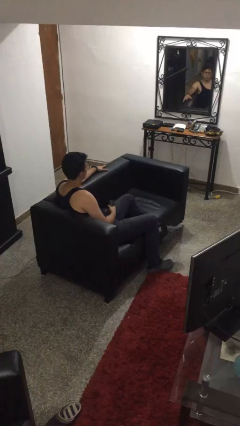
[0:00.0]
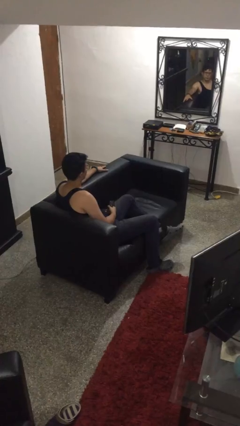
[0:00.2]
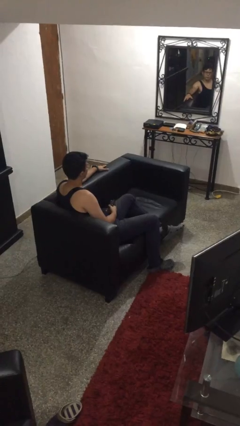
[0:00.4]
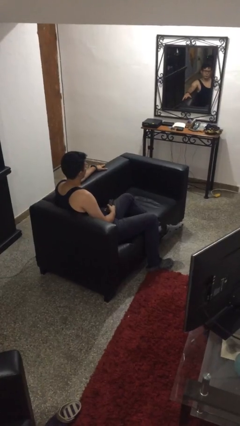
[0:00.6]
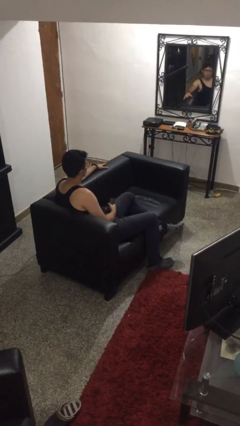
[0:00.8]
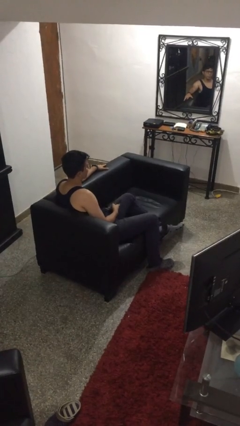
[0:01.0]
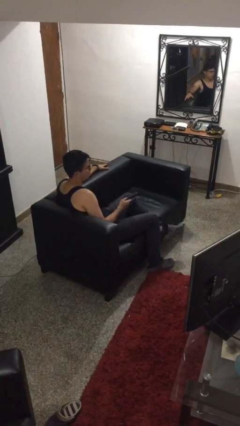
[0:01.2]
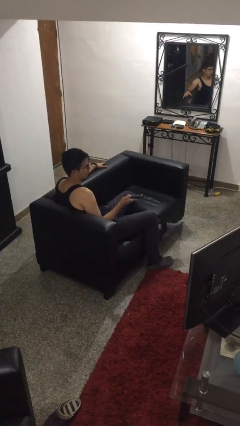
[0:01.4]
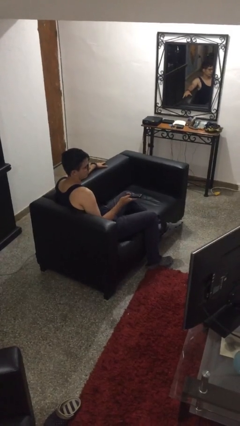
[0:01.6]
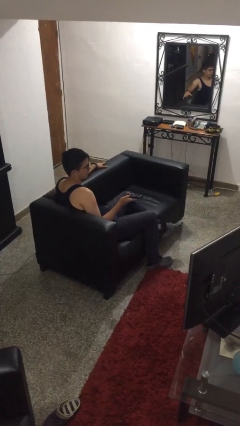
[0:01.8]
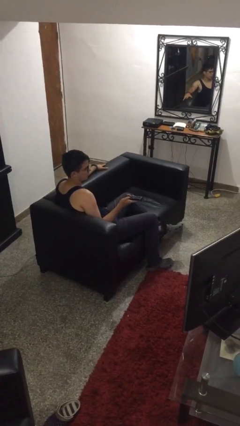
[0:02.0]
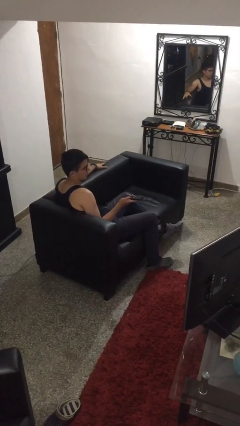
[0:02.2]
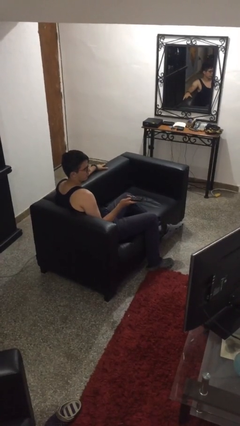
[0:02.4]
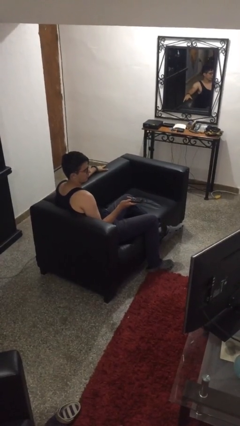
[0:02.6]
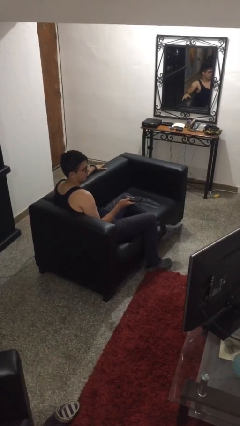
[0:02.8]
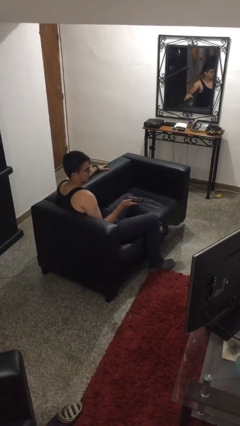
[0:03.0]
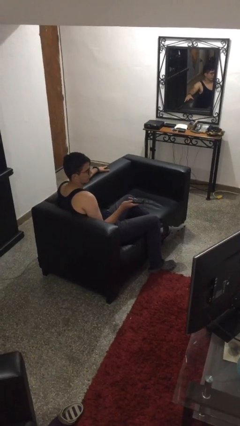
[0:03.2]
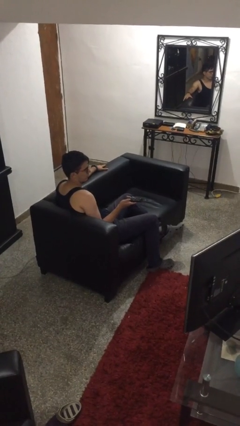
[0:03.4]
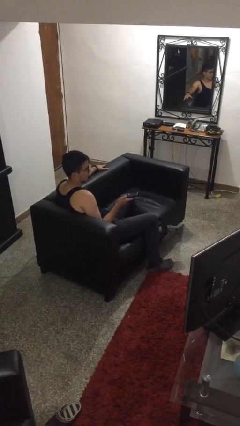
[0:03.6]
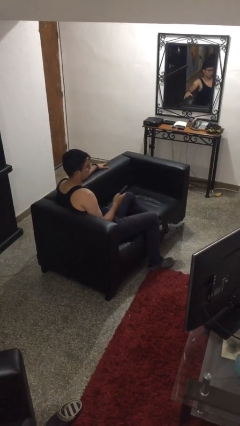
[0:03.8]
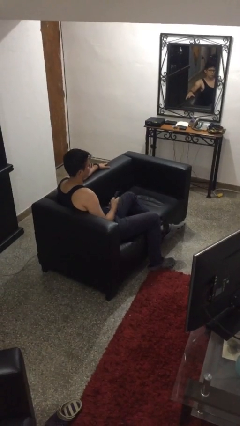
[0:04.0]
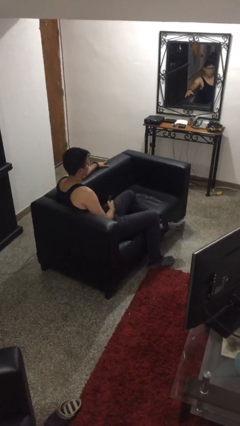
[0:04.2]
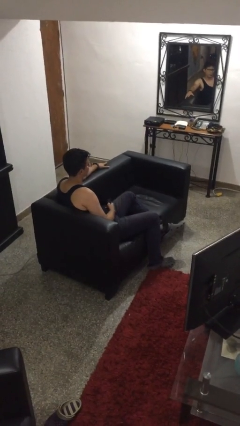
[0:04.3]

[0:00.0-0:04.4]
person uses television remote

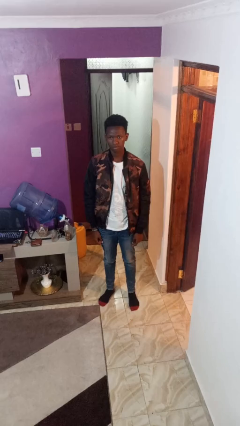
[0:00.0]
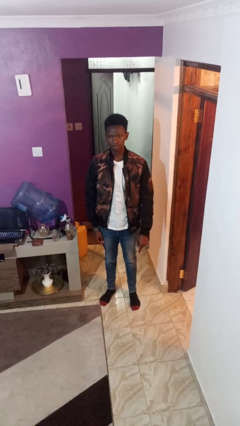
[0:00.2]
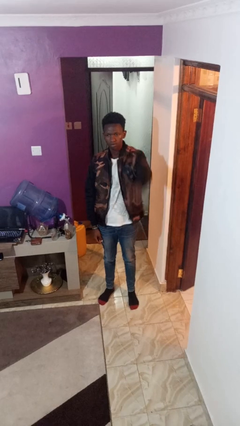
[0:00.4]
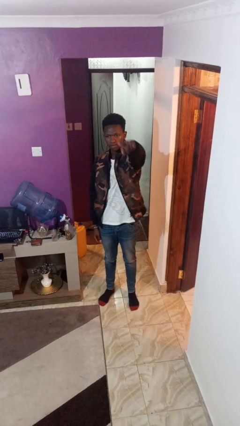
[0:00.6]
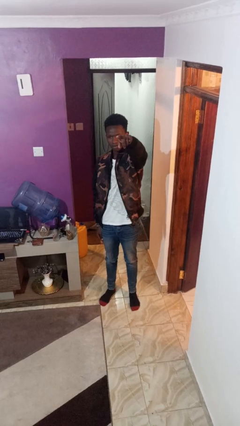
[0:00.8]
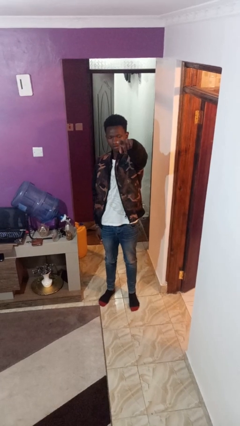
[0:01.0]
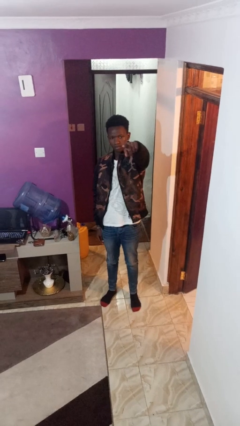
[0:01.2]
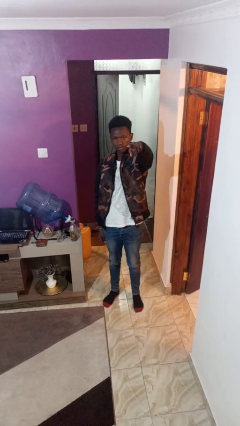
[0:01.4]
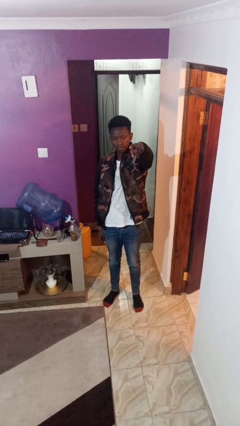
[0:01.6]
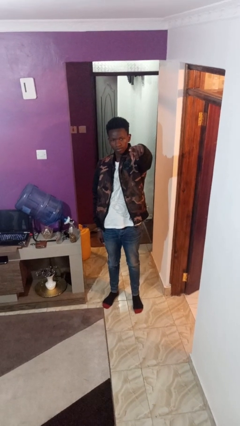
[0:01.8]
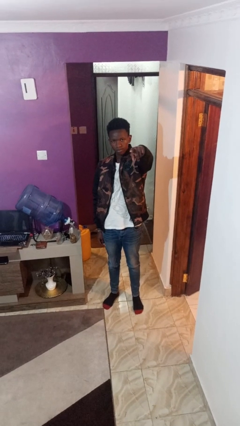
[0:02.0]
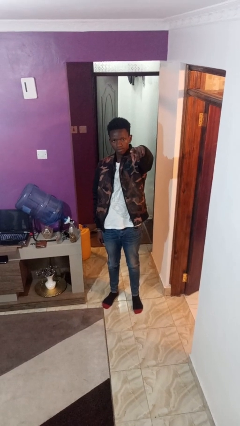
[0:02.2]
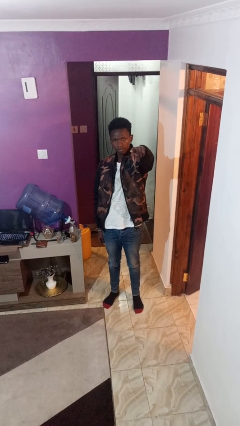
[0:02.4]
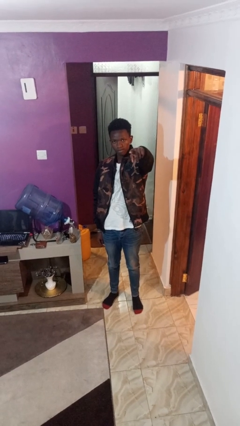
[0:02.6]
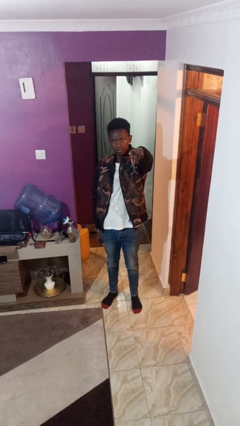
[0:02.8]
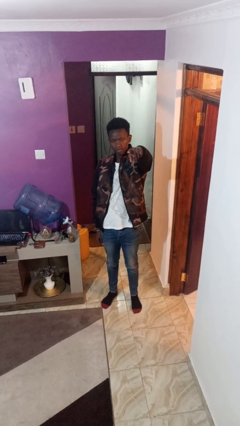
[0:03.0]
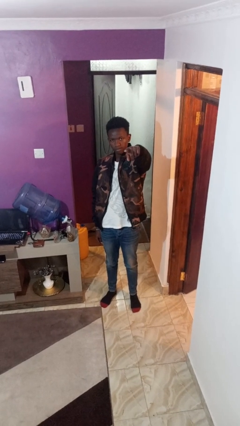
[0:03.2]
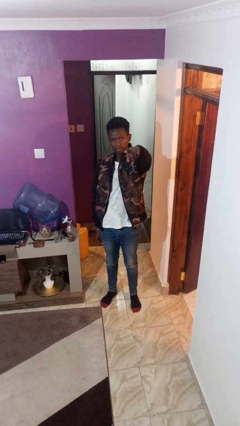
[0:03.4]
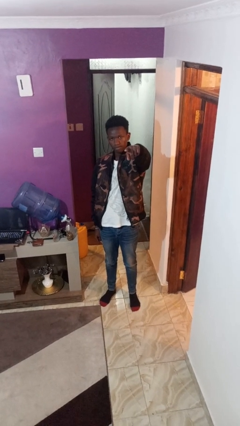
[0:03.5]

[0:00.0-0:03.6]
person points at person

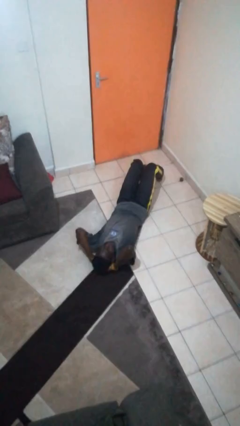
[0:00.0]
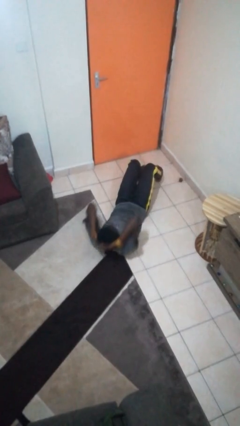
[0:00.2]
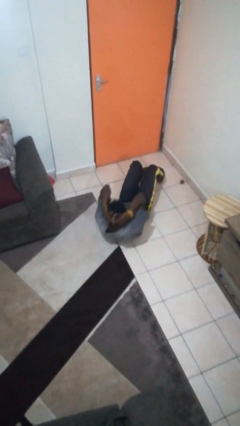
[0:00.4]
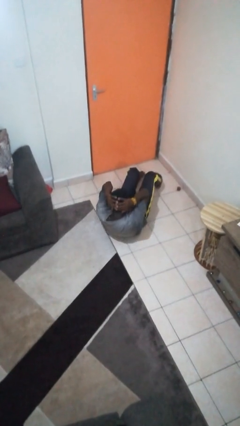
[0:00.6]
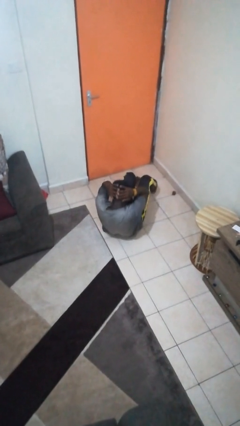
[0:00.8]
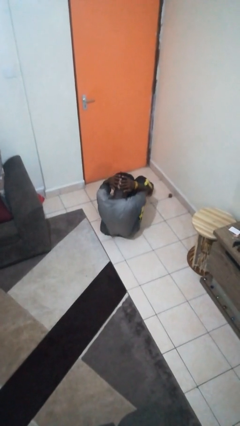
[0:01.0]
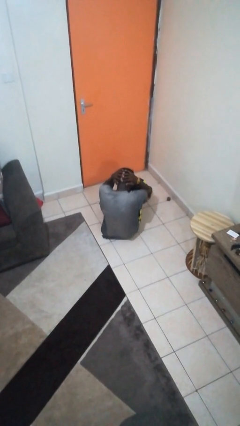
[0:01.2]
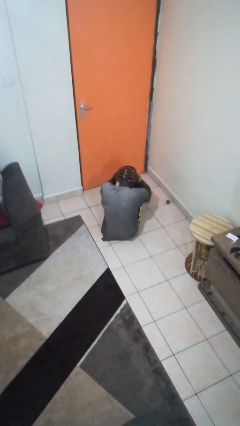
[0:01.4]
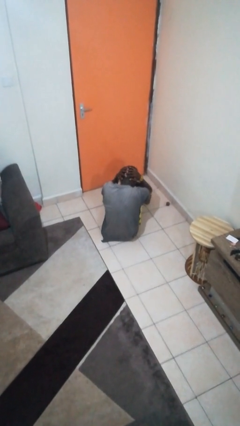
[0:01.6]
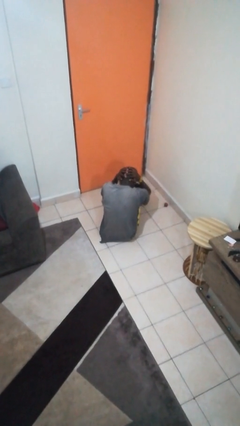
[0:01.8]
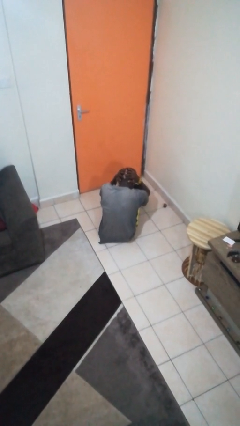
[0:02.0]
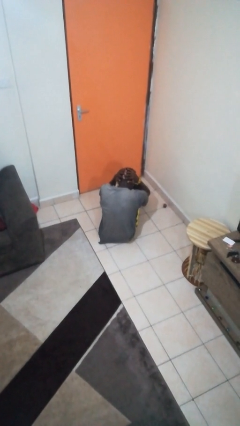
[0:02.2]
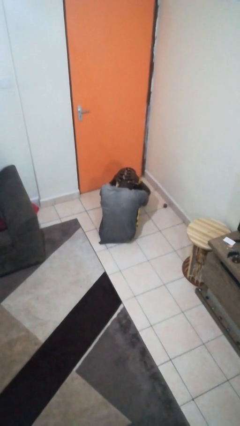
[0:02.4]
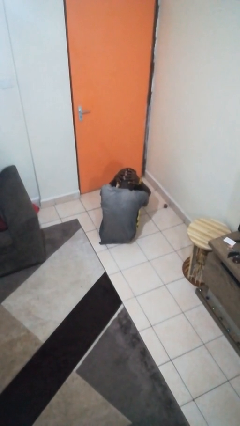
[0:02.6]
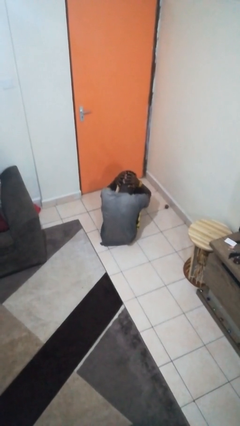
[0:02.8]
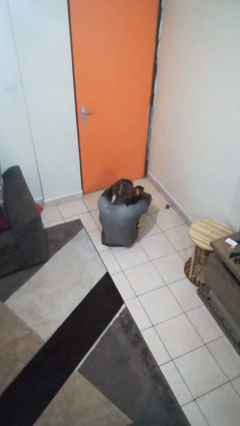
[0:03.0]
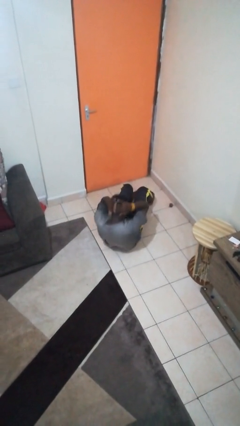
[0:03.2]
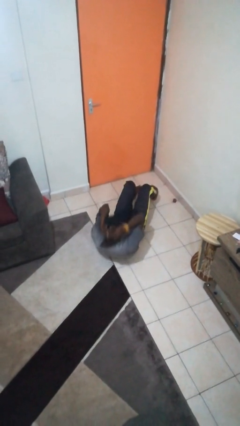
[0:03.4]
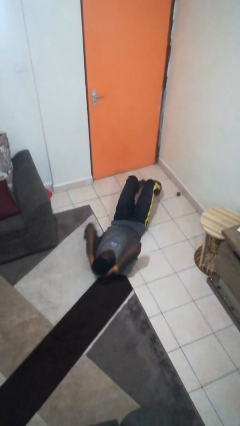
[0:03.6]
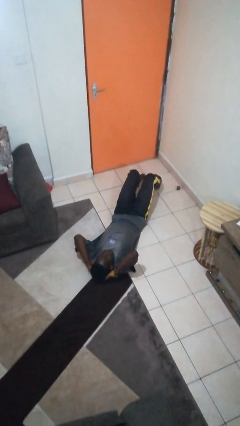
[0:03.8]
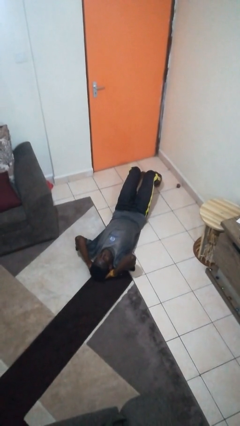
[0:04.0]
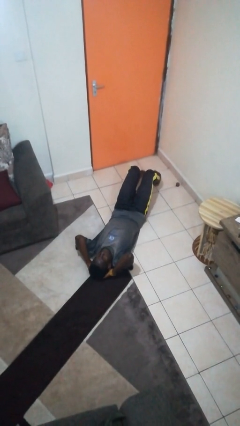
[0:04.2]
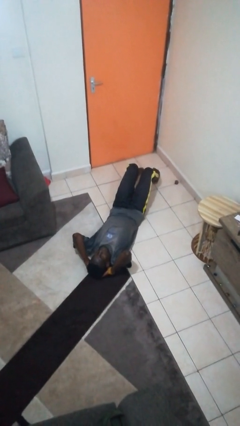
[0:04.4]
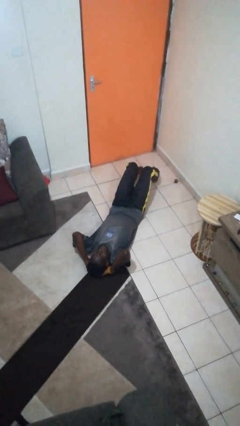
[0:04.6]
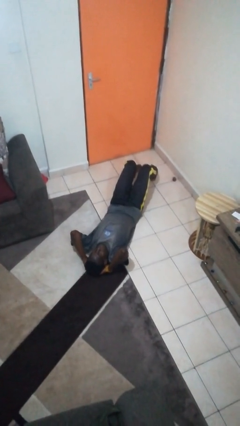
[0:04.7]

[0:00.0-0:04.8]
person exercises with situp

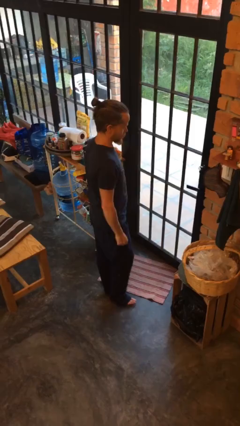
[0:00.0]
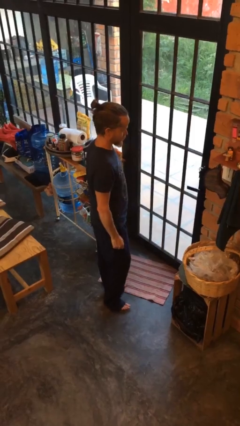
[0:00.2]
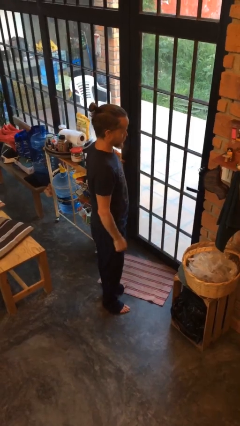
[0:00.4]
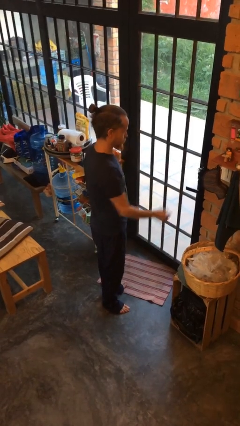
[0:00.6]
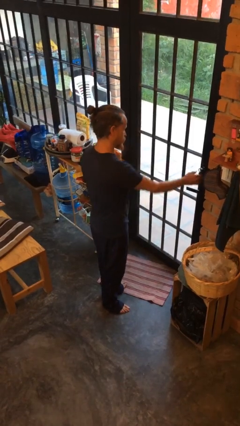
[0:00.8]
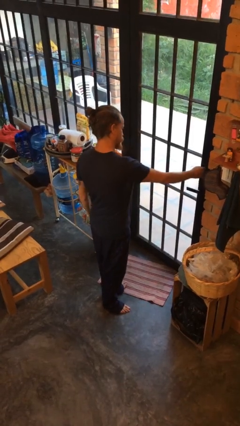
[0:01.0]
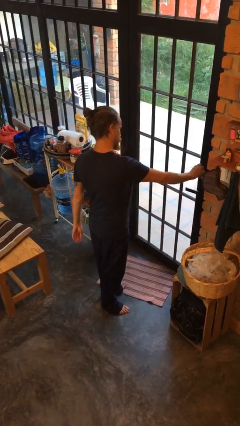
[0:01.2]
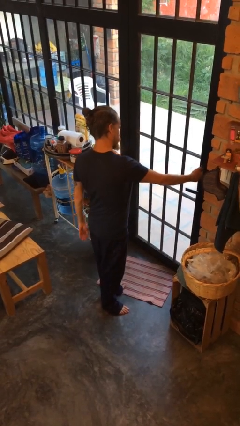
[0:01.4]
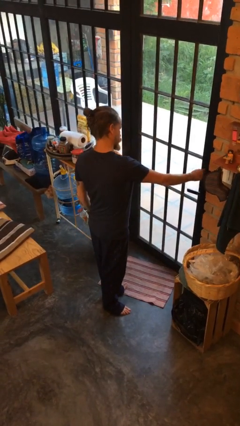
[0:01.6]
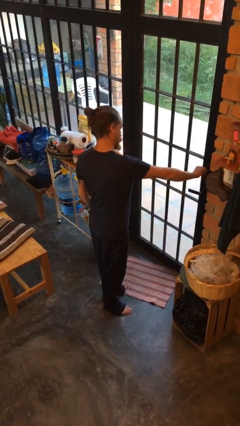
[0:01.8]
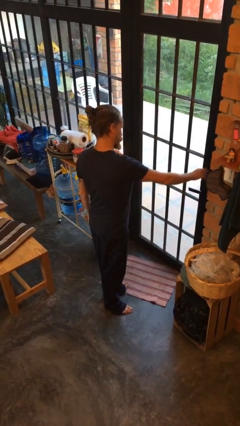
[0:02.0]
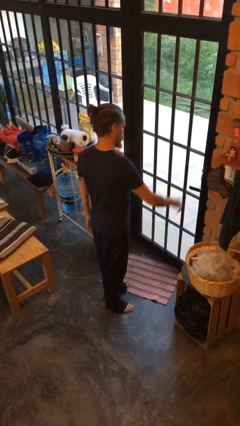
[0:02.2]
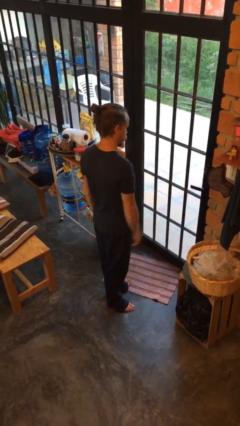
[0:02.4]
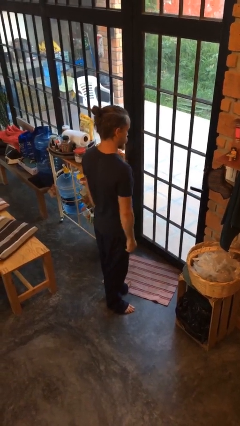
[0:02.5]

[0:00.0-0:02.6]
person unlocks door with keys

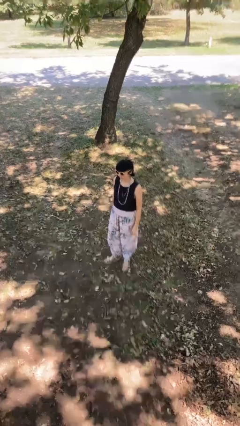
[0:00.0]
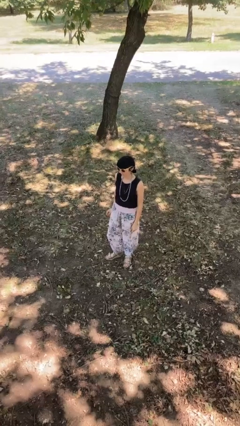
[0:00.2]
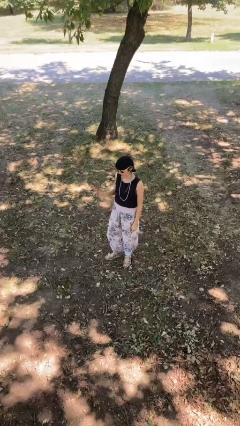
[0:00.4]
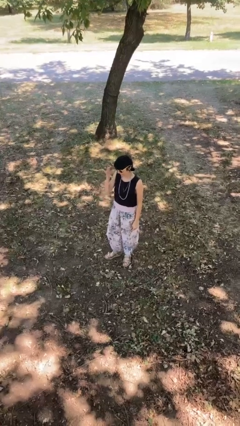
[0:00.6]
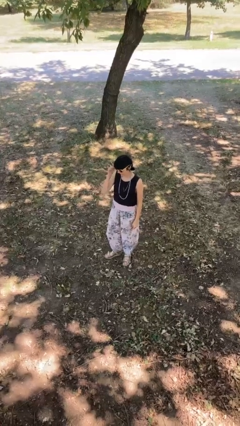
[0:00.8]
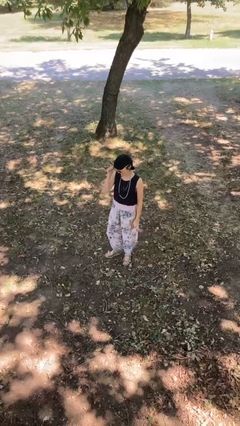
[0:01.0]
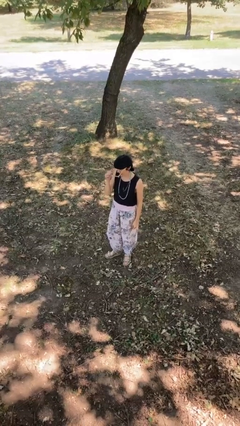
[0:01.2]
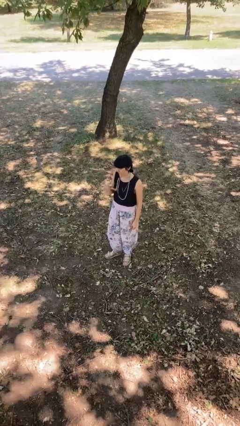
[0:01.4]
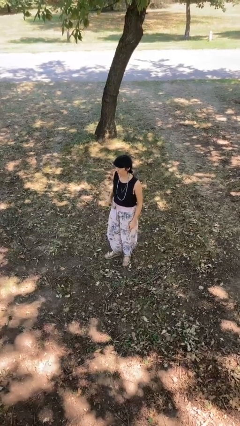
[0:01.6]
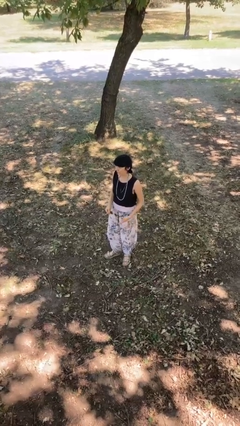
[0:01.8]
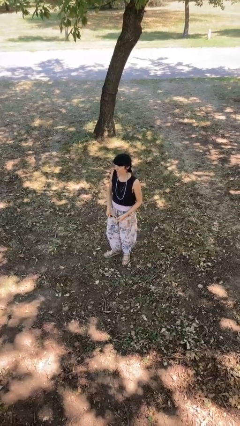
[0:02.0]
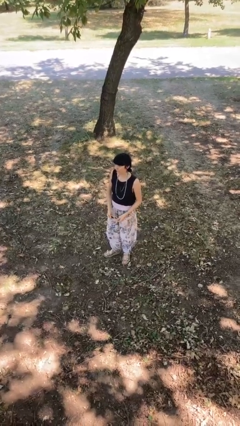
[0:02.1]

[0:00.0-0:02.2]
person takes off sunglasses
